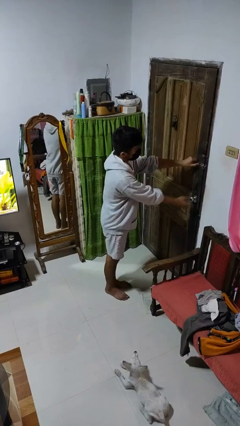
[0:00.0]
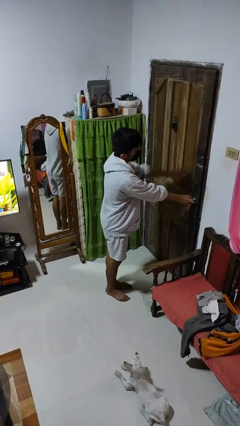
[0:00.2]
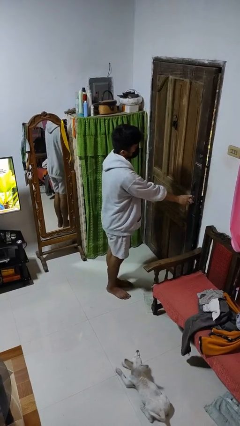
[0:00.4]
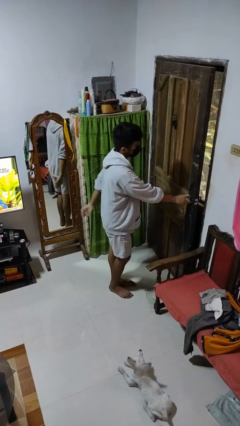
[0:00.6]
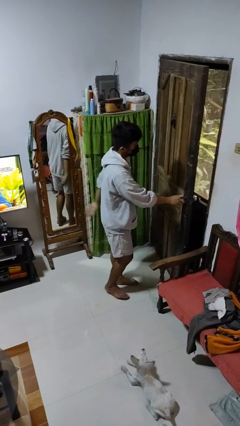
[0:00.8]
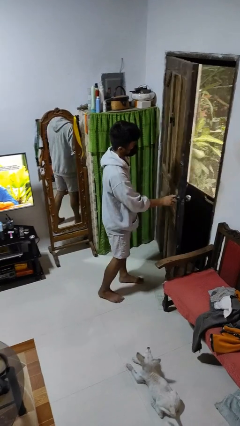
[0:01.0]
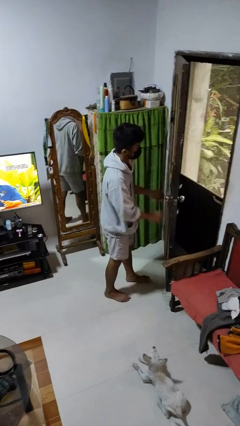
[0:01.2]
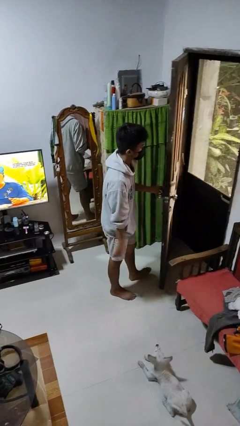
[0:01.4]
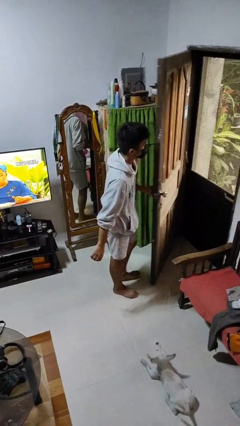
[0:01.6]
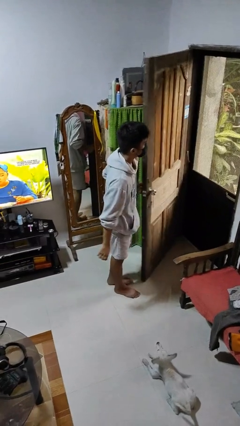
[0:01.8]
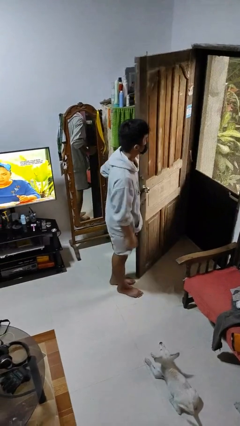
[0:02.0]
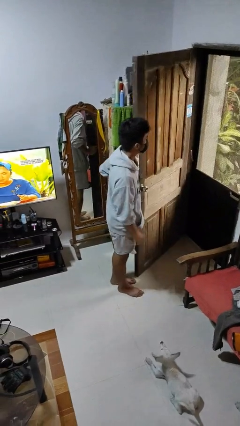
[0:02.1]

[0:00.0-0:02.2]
person opens facility door

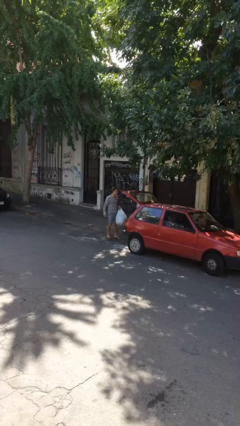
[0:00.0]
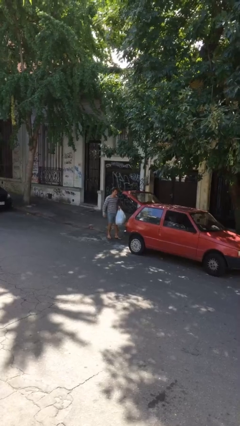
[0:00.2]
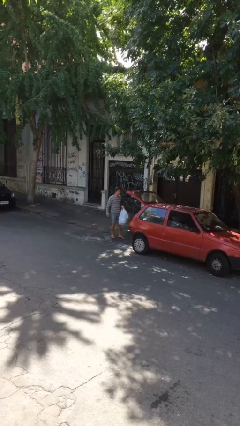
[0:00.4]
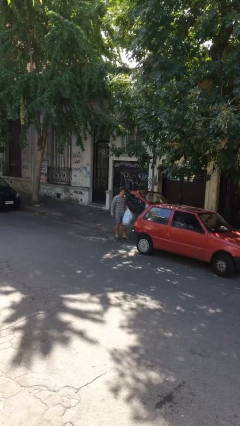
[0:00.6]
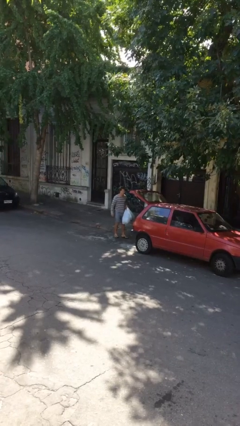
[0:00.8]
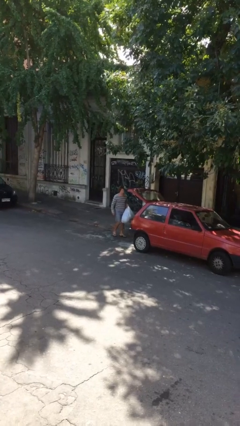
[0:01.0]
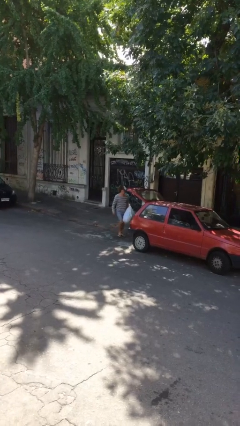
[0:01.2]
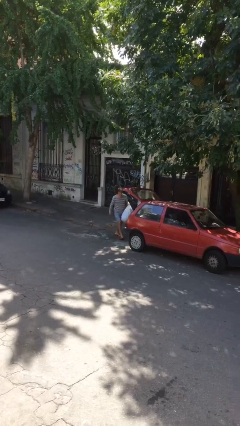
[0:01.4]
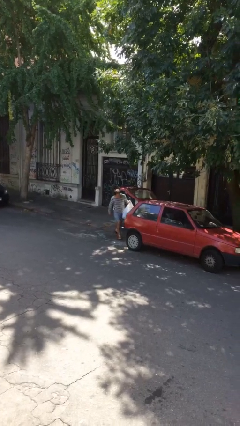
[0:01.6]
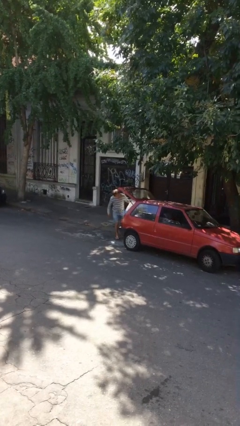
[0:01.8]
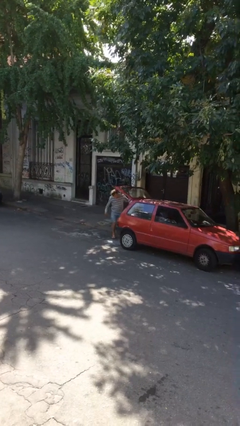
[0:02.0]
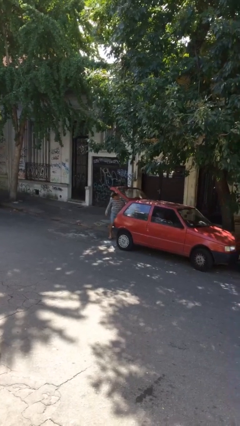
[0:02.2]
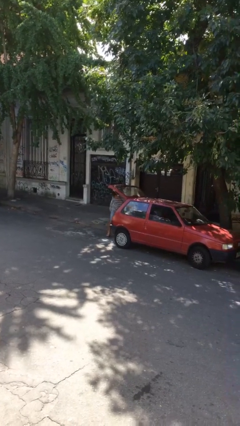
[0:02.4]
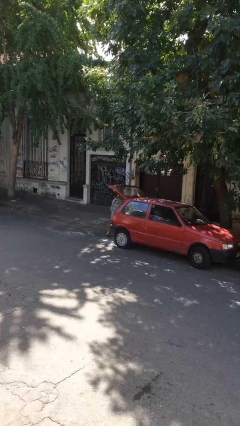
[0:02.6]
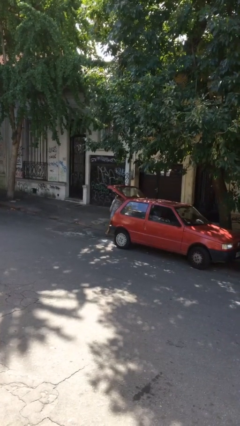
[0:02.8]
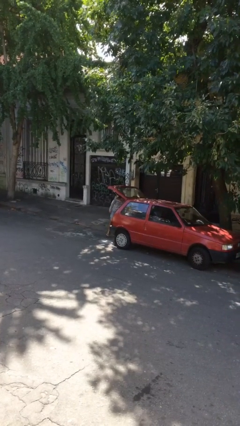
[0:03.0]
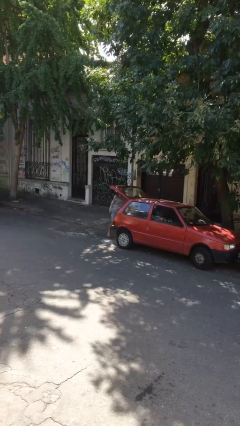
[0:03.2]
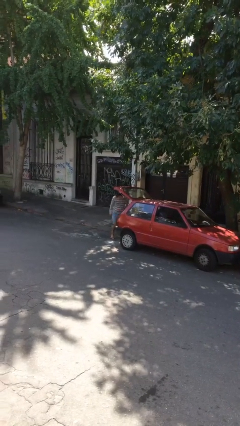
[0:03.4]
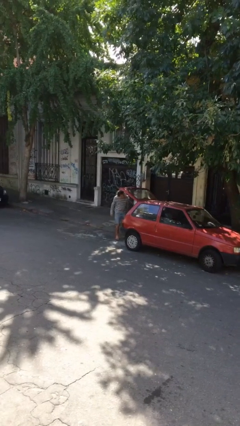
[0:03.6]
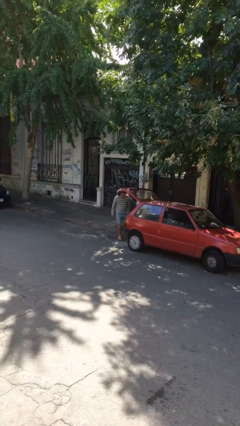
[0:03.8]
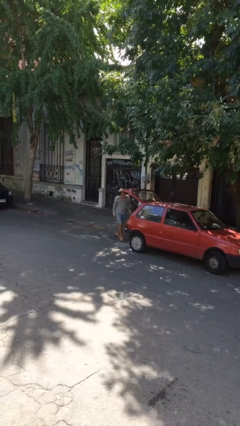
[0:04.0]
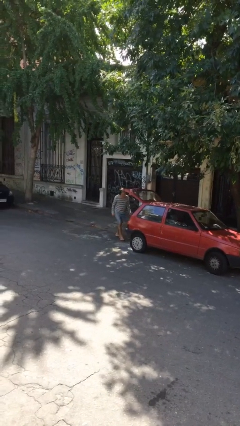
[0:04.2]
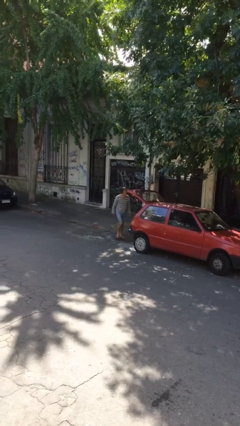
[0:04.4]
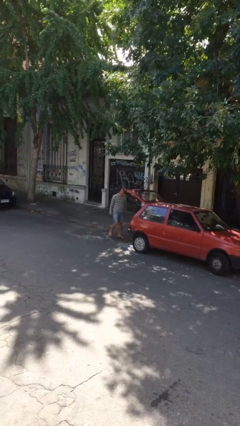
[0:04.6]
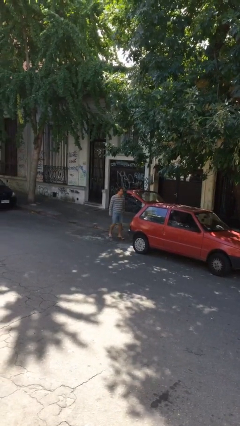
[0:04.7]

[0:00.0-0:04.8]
person loads car

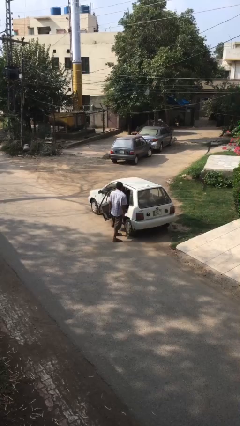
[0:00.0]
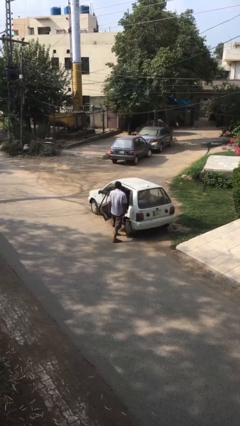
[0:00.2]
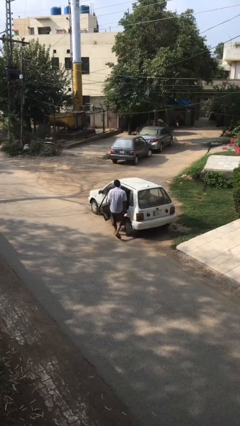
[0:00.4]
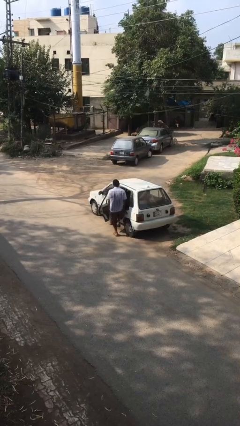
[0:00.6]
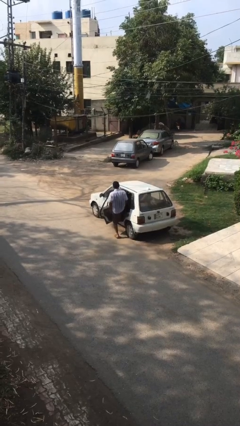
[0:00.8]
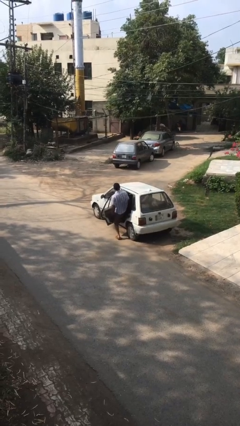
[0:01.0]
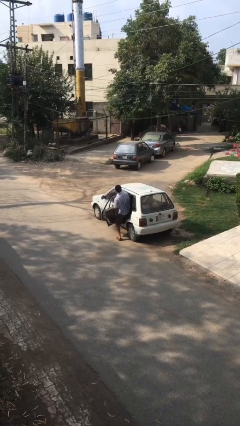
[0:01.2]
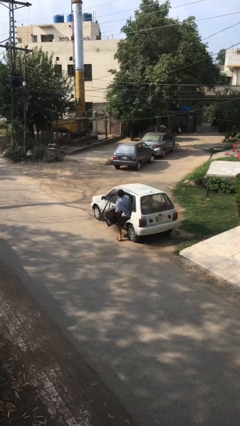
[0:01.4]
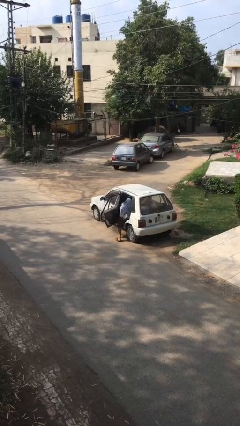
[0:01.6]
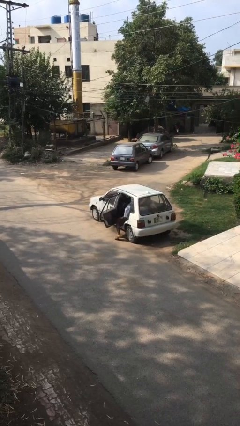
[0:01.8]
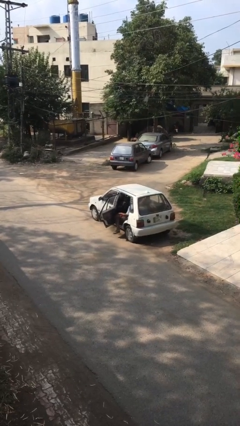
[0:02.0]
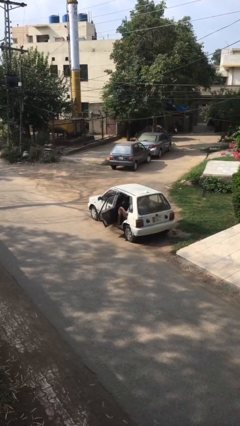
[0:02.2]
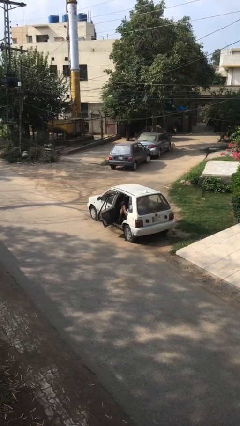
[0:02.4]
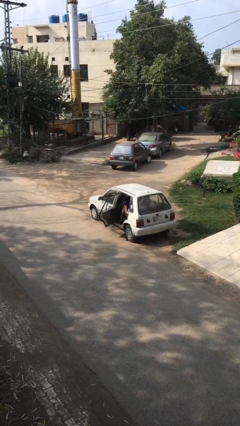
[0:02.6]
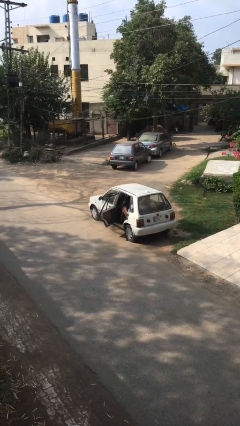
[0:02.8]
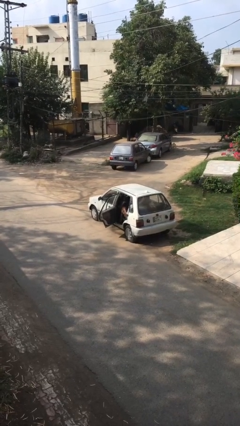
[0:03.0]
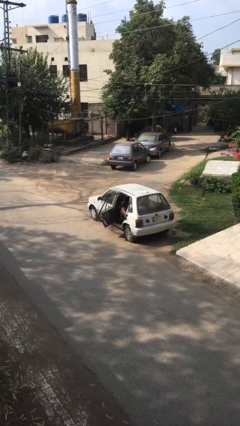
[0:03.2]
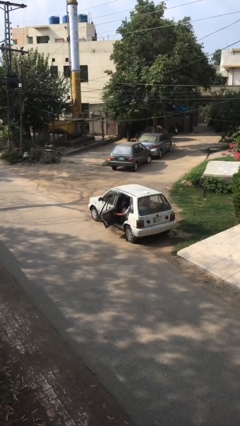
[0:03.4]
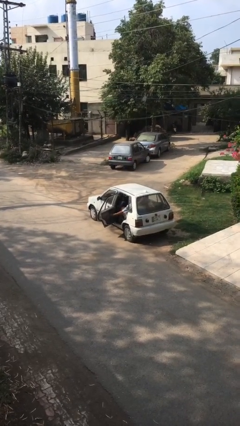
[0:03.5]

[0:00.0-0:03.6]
person enters car

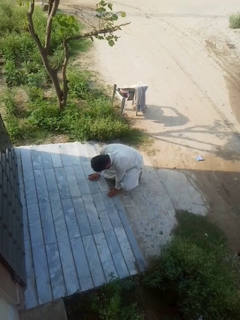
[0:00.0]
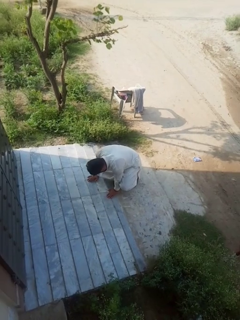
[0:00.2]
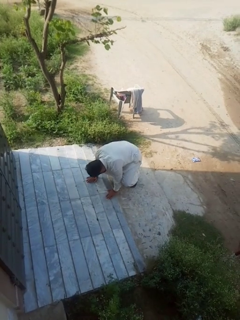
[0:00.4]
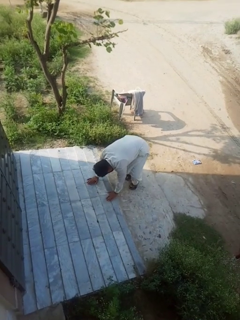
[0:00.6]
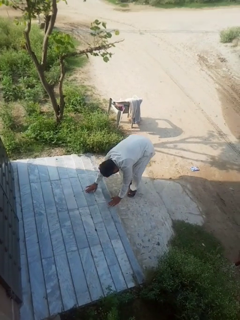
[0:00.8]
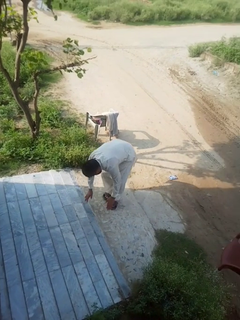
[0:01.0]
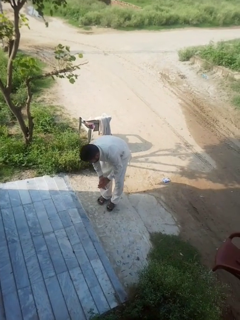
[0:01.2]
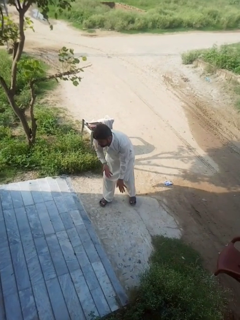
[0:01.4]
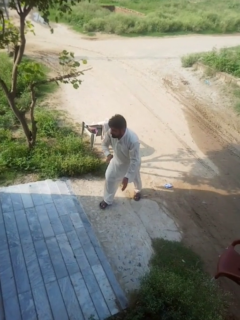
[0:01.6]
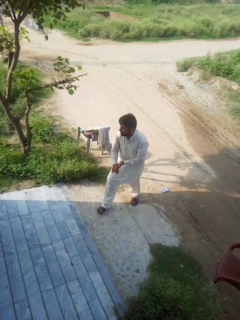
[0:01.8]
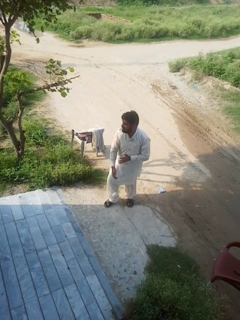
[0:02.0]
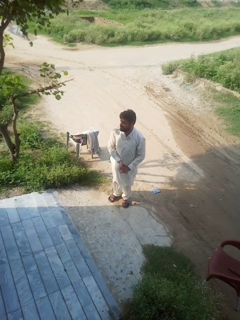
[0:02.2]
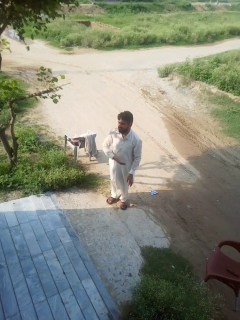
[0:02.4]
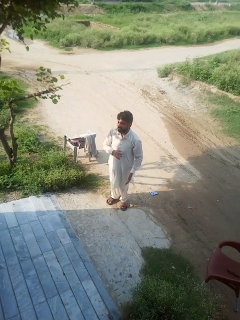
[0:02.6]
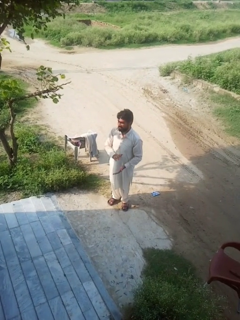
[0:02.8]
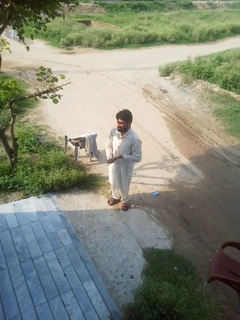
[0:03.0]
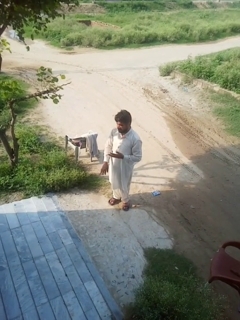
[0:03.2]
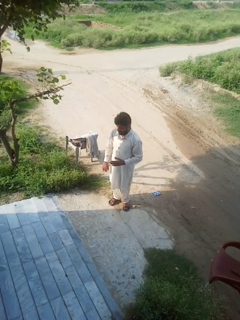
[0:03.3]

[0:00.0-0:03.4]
person stands up from floor

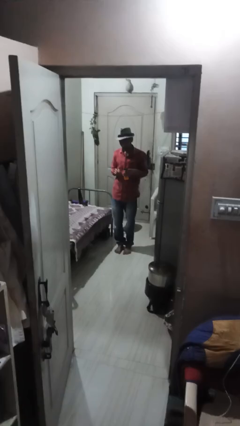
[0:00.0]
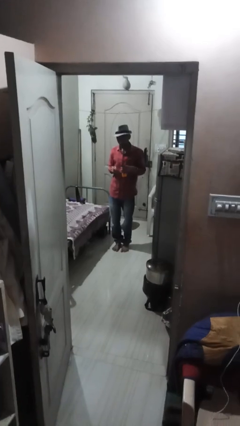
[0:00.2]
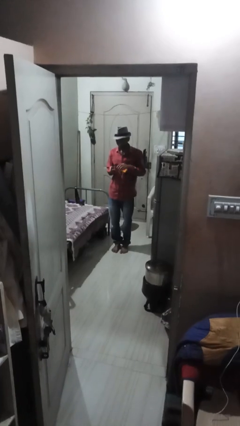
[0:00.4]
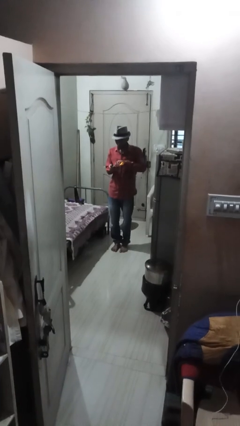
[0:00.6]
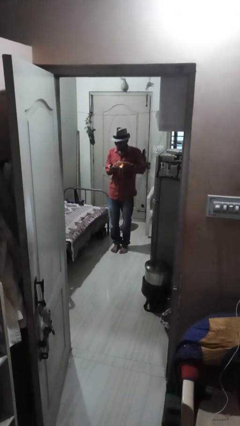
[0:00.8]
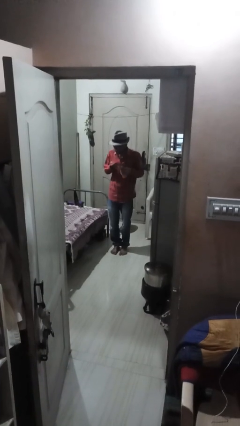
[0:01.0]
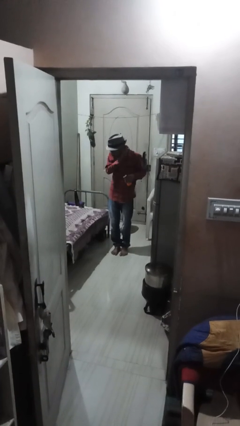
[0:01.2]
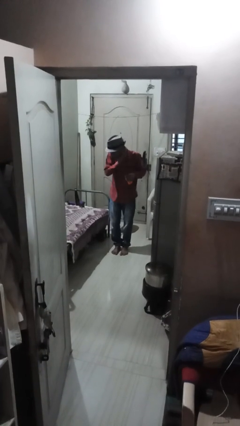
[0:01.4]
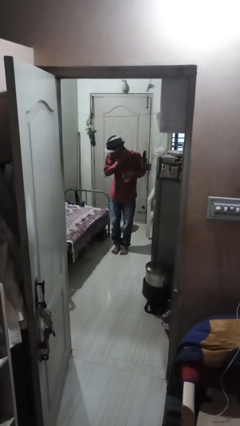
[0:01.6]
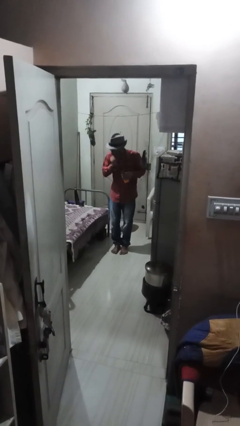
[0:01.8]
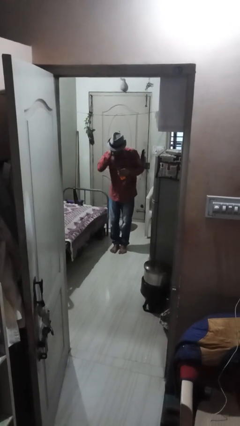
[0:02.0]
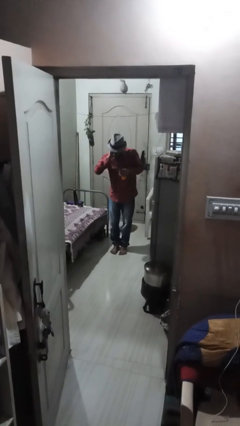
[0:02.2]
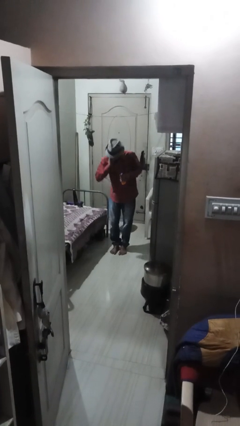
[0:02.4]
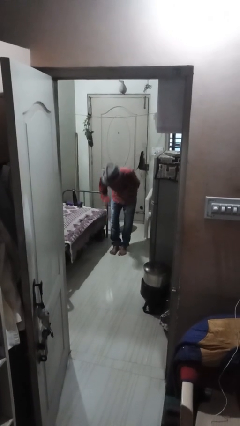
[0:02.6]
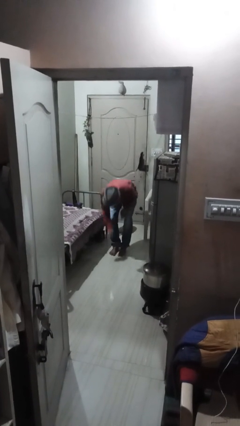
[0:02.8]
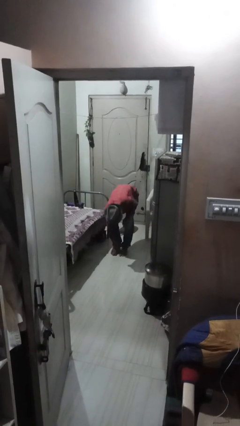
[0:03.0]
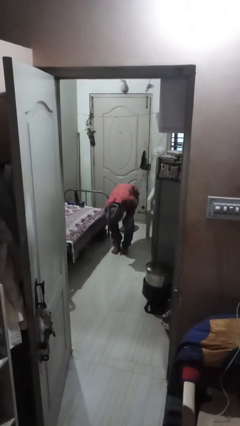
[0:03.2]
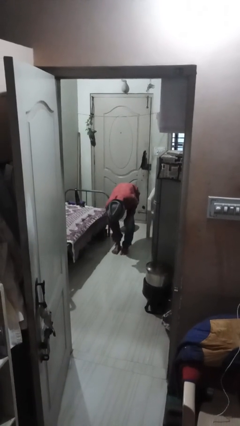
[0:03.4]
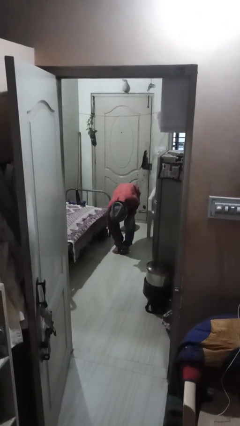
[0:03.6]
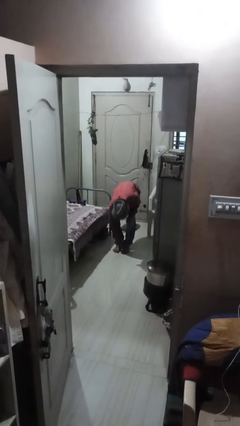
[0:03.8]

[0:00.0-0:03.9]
person applies sunscreen
